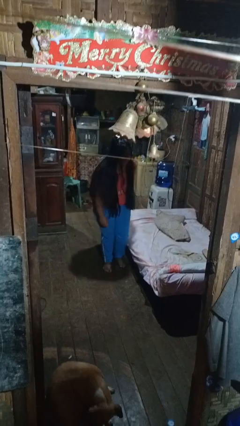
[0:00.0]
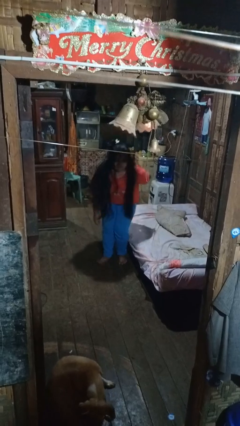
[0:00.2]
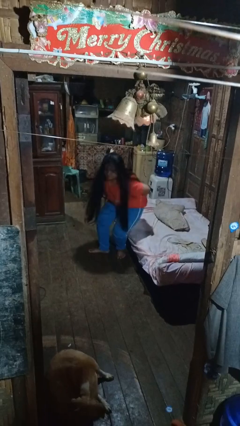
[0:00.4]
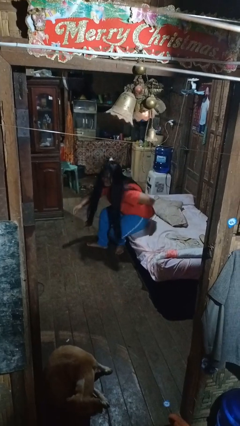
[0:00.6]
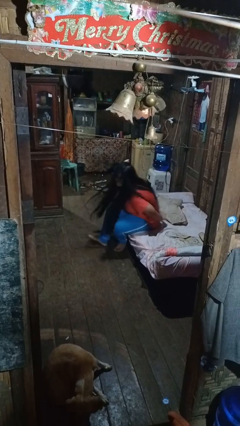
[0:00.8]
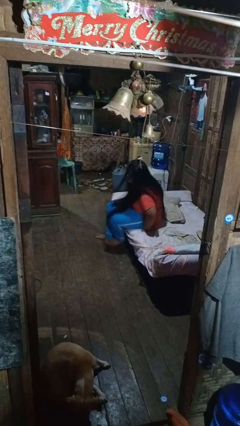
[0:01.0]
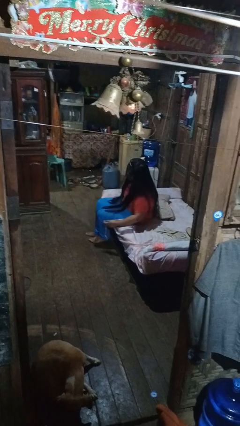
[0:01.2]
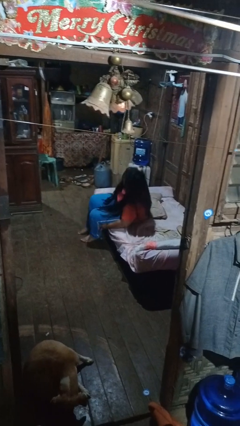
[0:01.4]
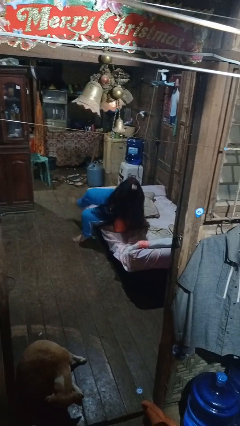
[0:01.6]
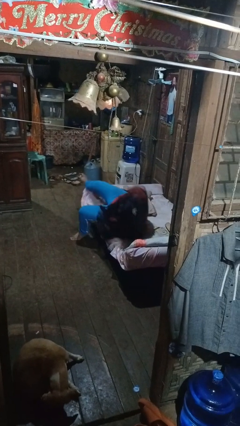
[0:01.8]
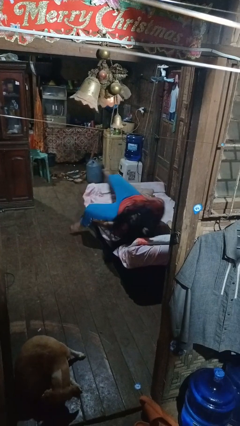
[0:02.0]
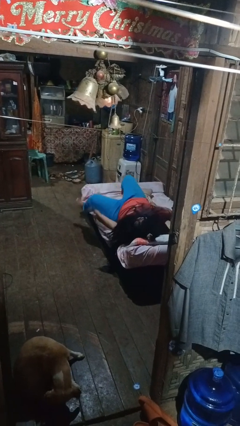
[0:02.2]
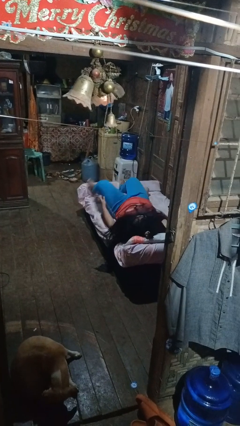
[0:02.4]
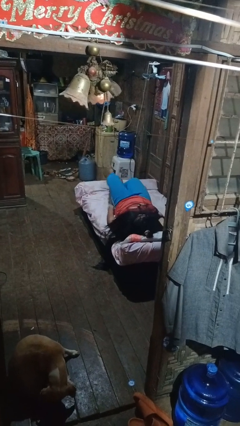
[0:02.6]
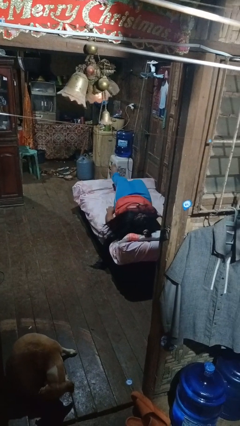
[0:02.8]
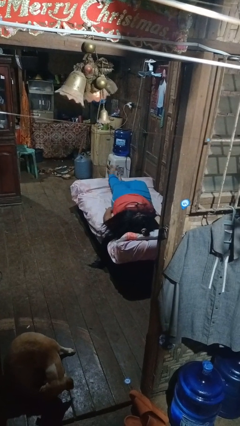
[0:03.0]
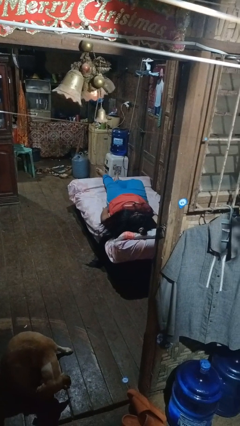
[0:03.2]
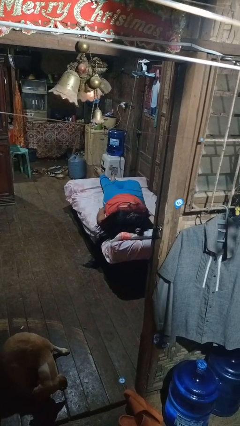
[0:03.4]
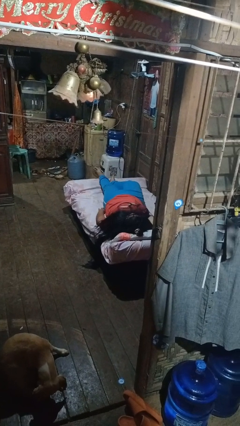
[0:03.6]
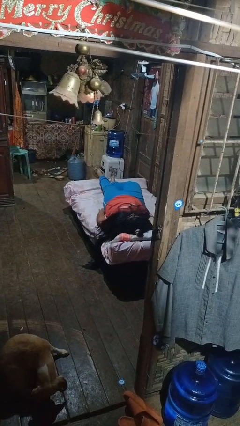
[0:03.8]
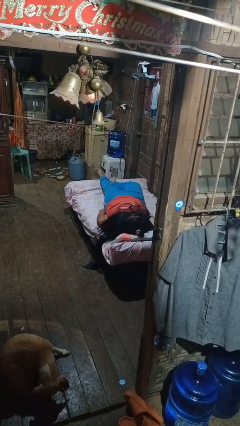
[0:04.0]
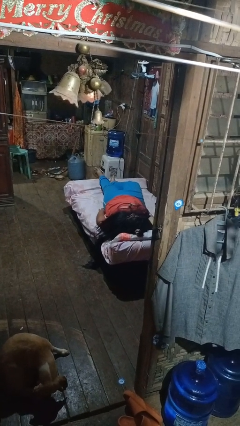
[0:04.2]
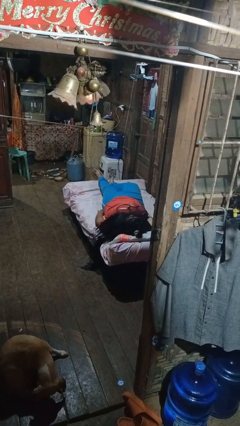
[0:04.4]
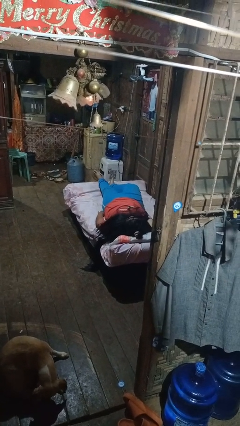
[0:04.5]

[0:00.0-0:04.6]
person lies down on bed

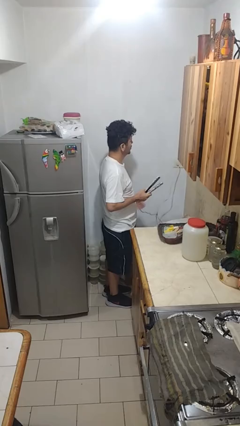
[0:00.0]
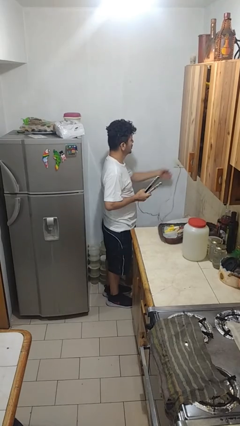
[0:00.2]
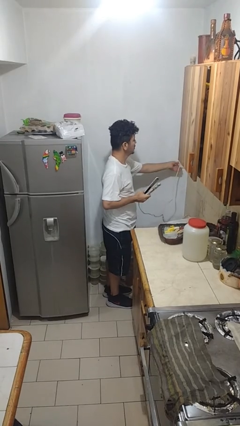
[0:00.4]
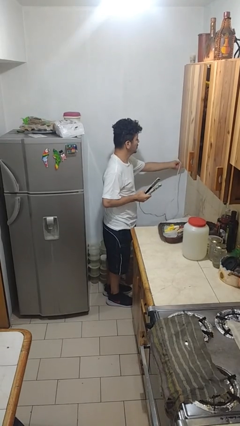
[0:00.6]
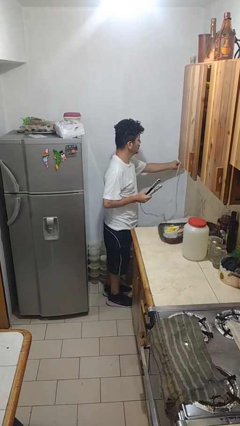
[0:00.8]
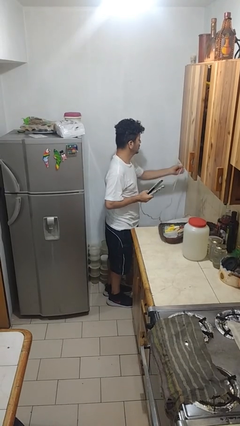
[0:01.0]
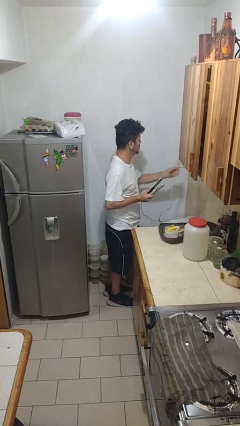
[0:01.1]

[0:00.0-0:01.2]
person unplugs from electrical socket

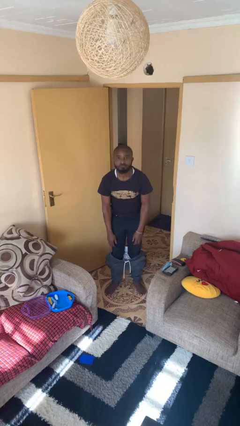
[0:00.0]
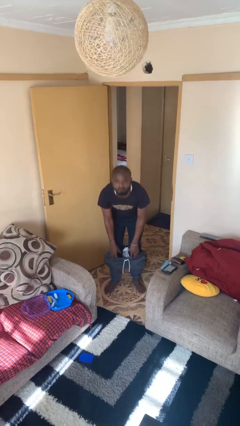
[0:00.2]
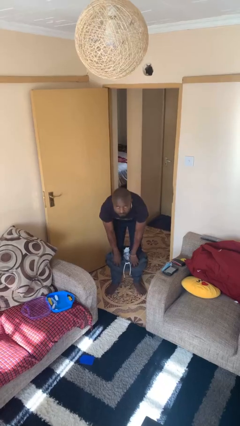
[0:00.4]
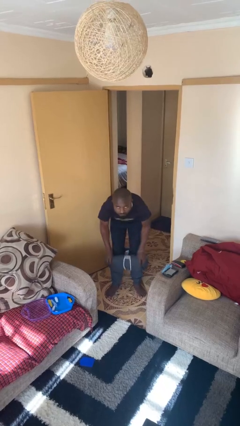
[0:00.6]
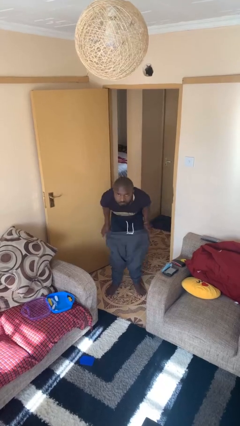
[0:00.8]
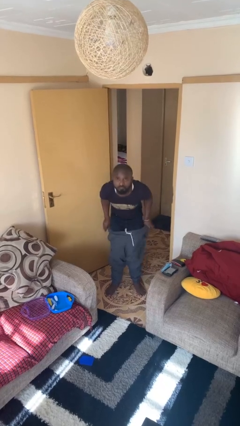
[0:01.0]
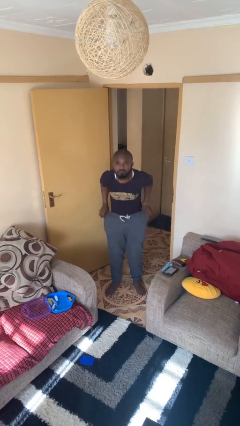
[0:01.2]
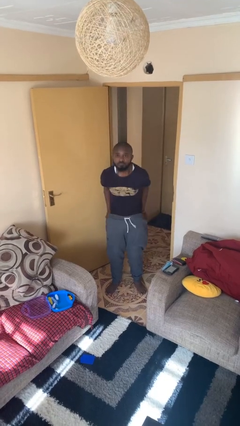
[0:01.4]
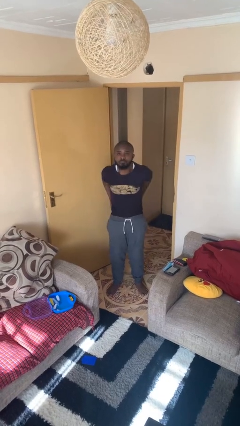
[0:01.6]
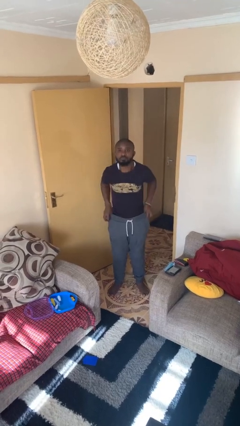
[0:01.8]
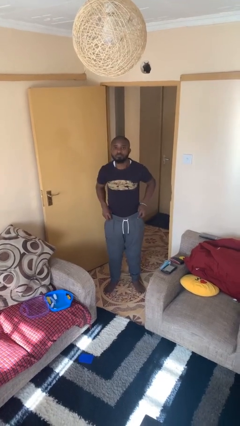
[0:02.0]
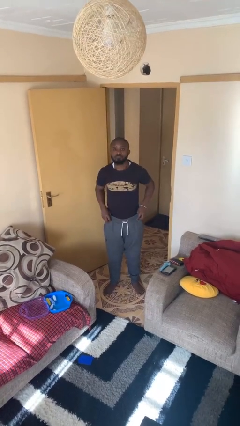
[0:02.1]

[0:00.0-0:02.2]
person puts on pants

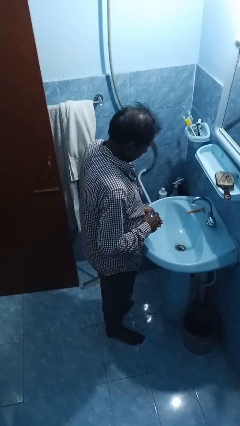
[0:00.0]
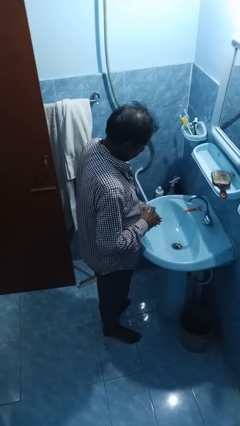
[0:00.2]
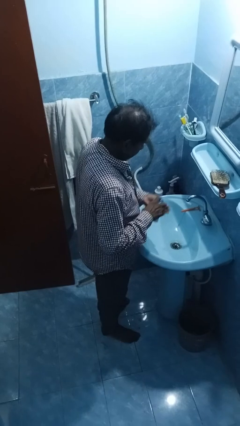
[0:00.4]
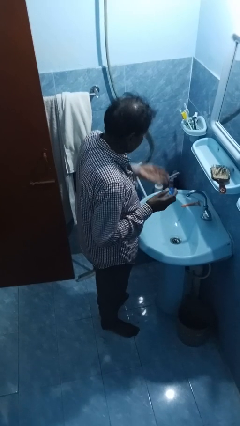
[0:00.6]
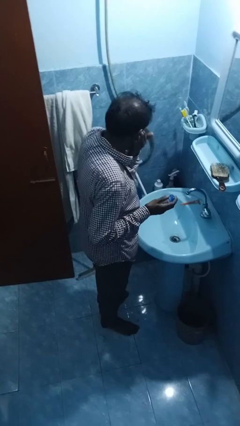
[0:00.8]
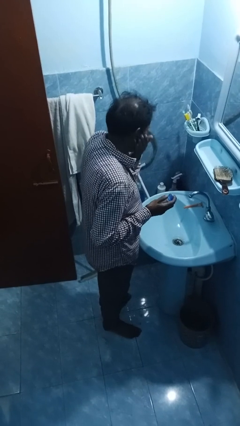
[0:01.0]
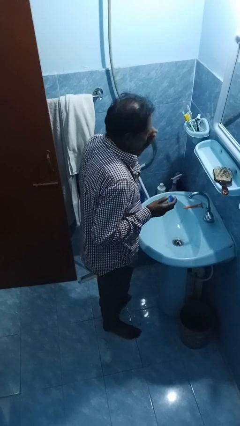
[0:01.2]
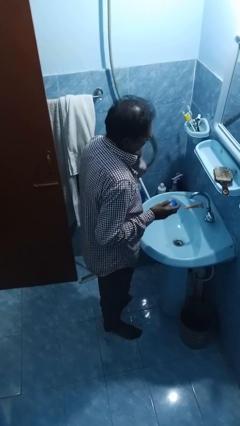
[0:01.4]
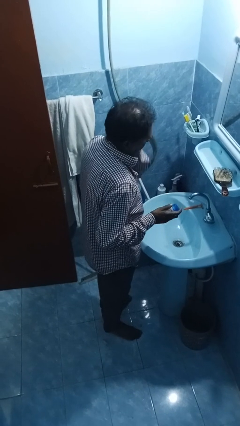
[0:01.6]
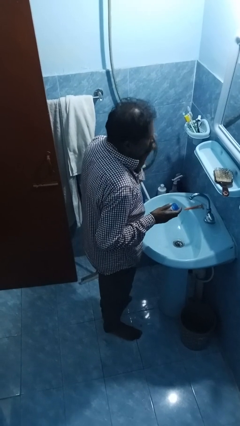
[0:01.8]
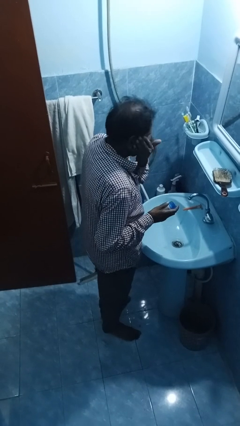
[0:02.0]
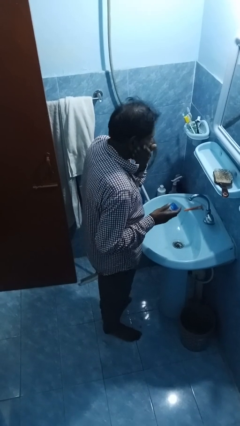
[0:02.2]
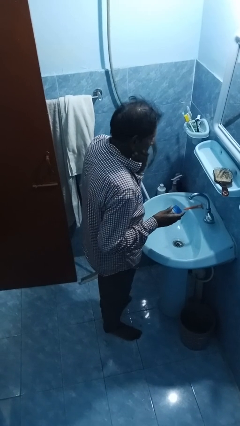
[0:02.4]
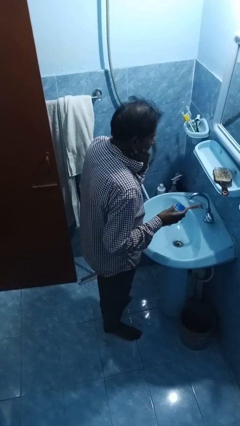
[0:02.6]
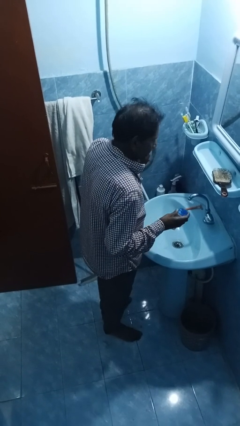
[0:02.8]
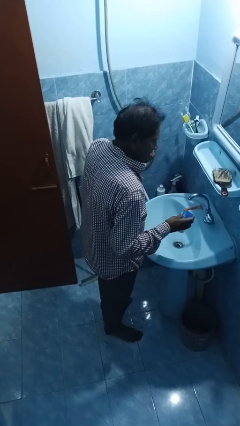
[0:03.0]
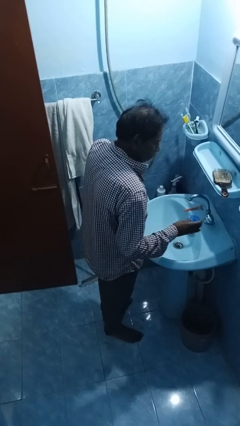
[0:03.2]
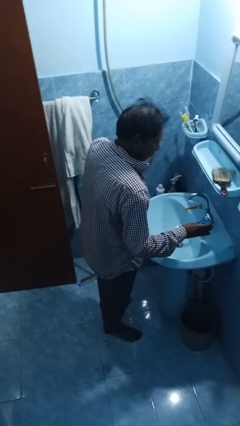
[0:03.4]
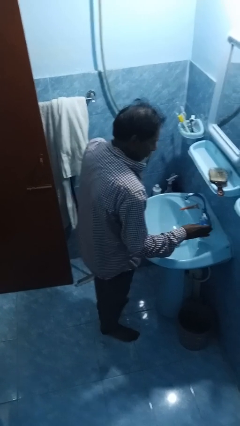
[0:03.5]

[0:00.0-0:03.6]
person applies shaving cream

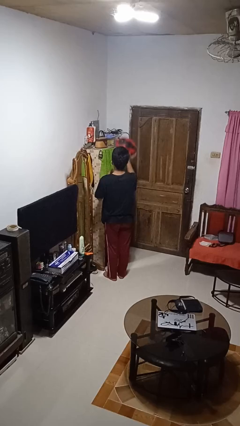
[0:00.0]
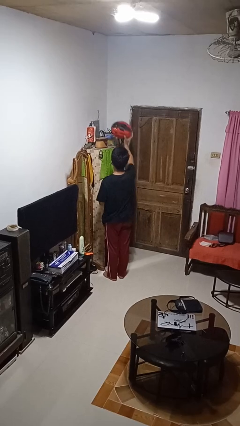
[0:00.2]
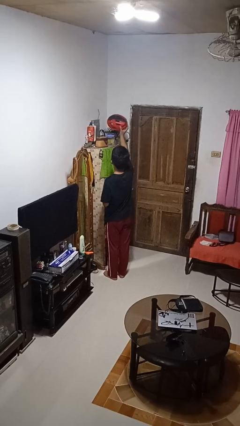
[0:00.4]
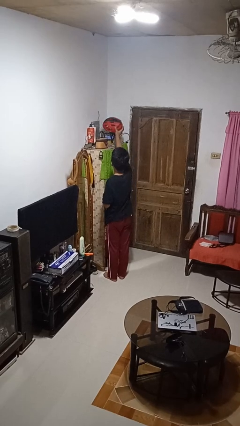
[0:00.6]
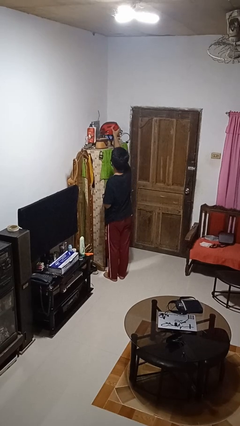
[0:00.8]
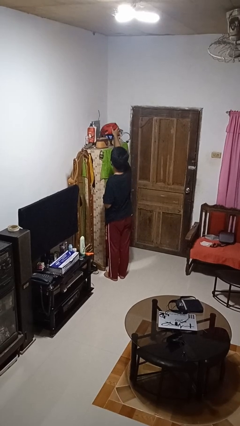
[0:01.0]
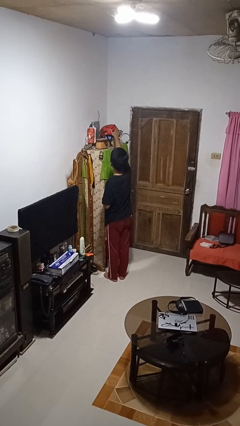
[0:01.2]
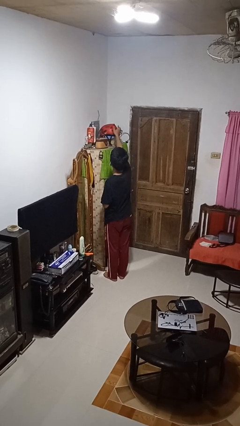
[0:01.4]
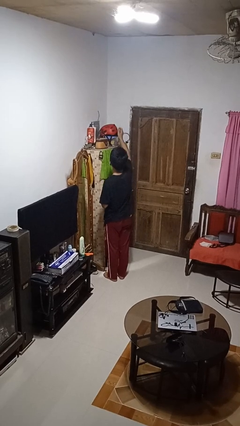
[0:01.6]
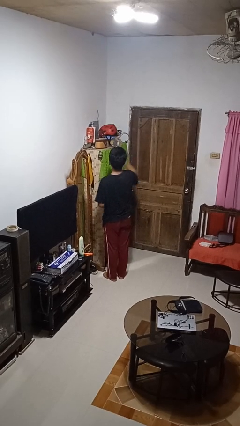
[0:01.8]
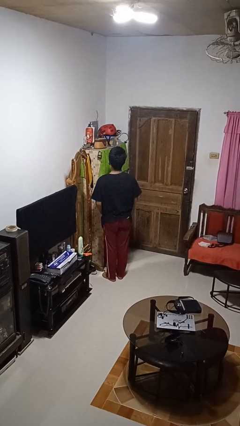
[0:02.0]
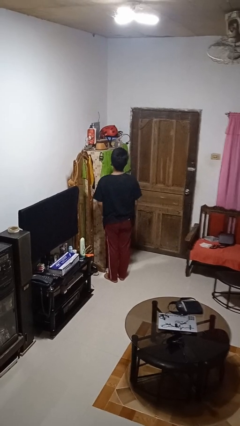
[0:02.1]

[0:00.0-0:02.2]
person puts down object on shelf

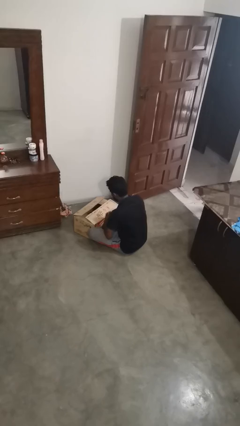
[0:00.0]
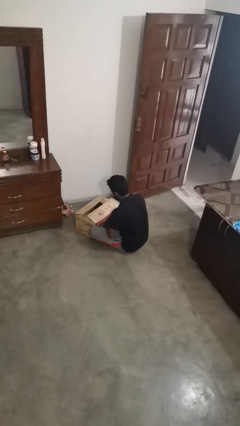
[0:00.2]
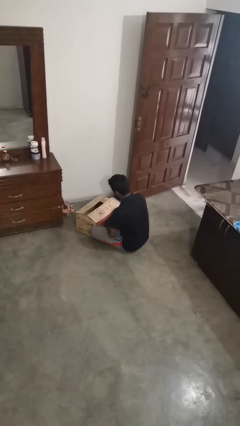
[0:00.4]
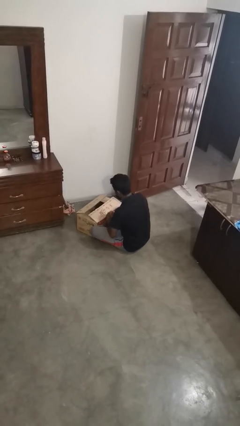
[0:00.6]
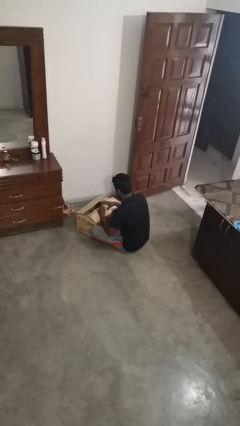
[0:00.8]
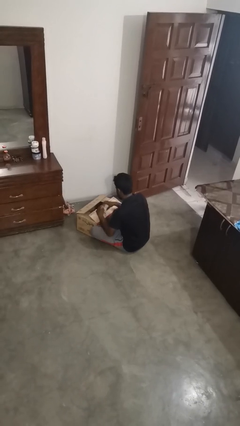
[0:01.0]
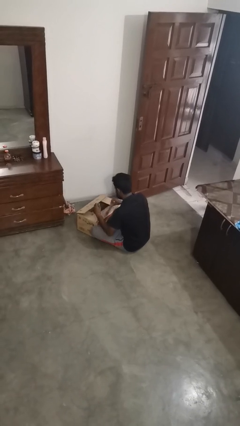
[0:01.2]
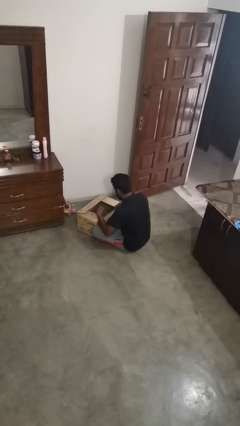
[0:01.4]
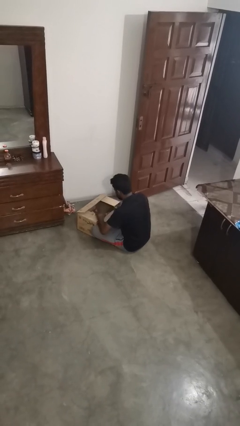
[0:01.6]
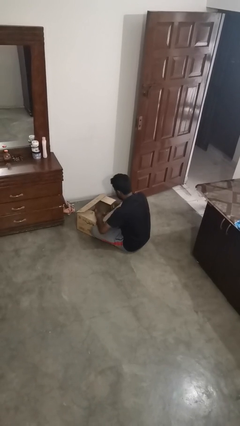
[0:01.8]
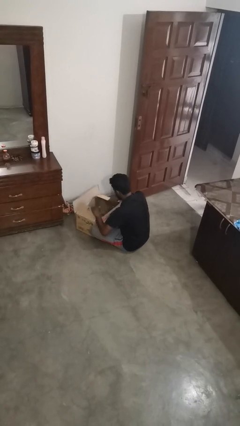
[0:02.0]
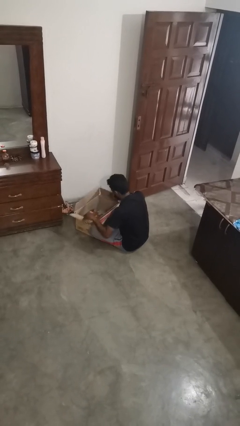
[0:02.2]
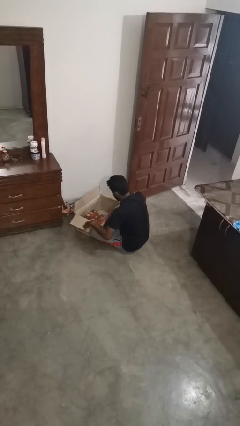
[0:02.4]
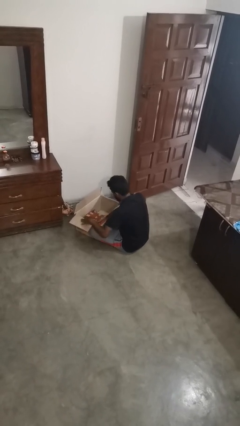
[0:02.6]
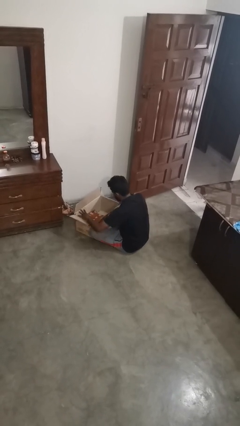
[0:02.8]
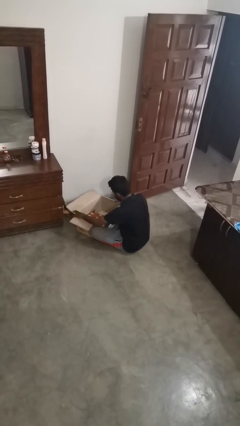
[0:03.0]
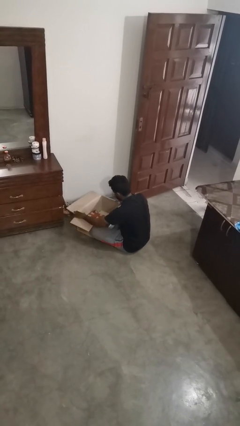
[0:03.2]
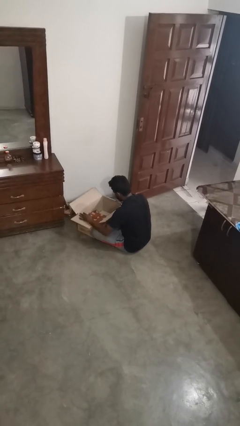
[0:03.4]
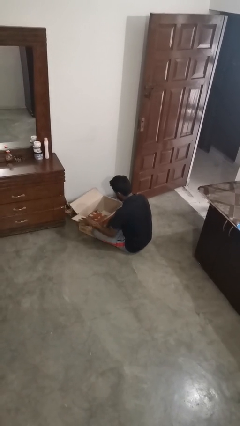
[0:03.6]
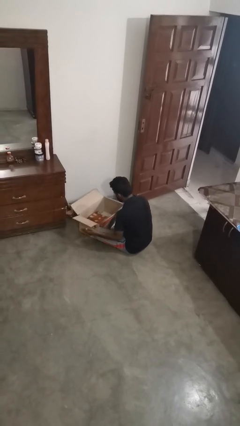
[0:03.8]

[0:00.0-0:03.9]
person opens box
